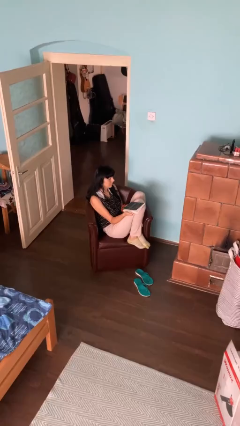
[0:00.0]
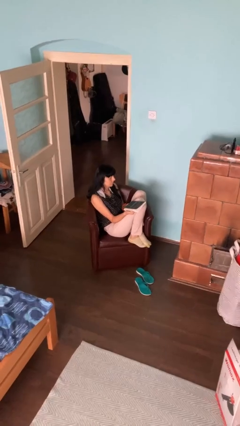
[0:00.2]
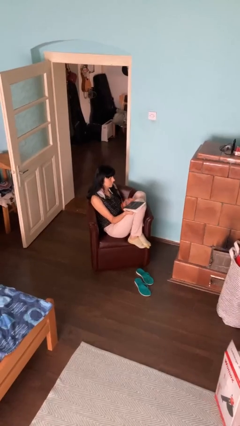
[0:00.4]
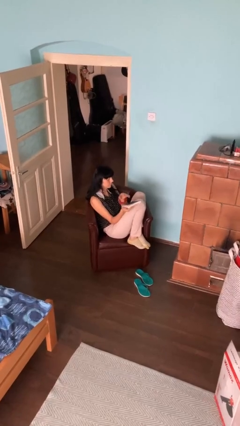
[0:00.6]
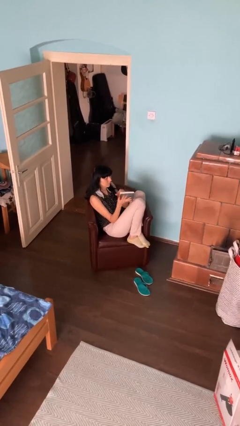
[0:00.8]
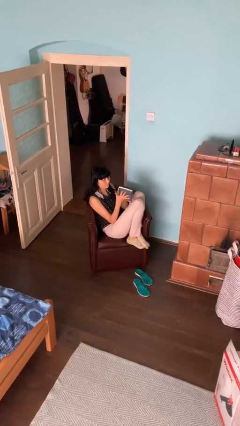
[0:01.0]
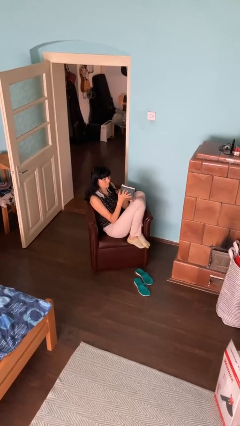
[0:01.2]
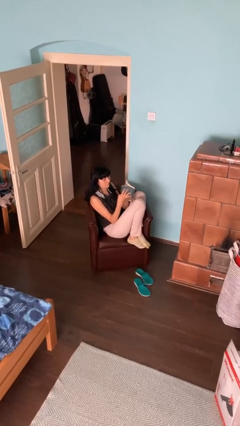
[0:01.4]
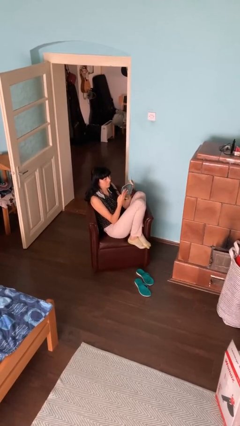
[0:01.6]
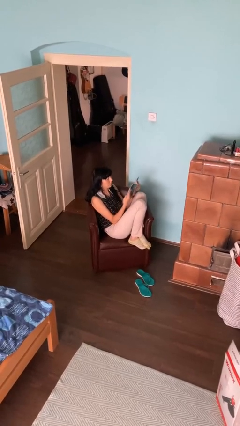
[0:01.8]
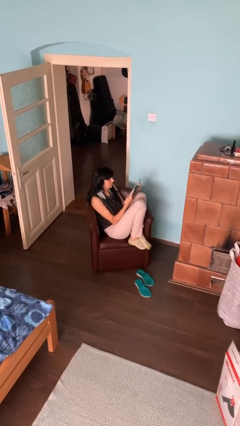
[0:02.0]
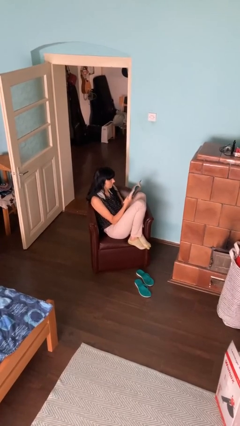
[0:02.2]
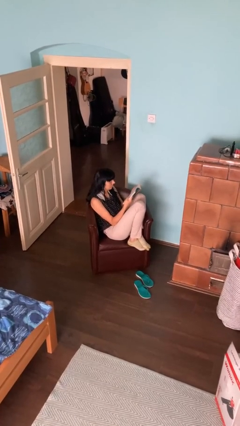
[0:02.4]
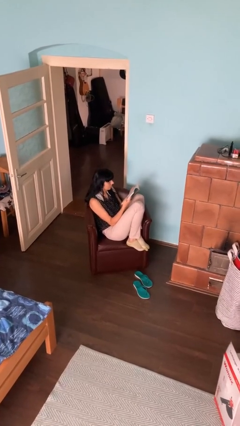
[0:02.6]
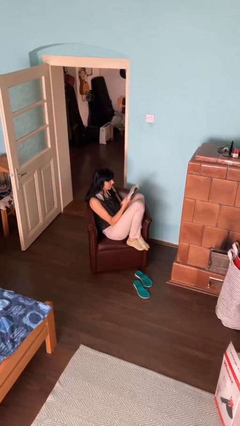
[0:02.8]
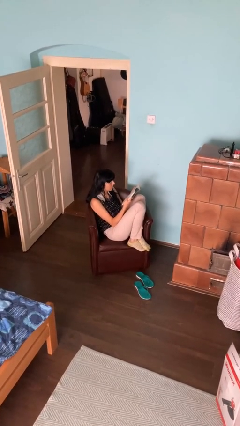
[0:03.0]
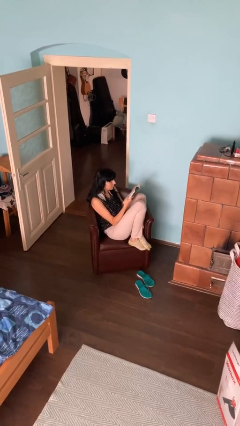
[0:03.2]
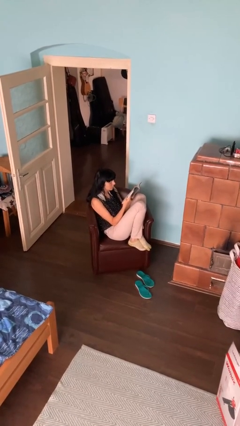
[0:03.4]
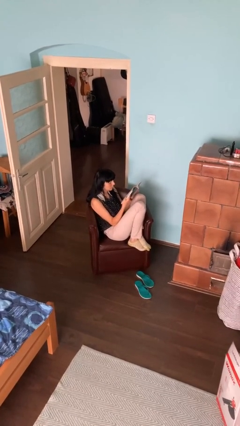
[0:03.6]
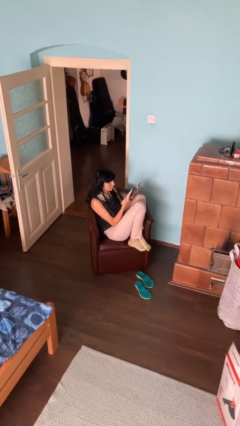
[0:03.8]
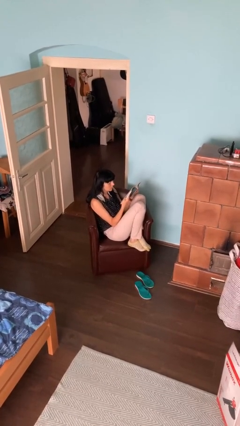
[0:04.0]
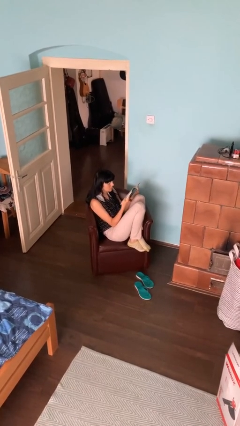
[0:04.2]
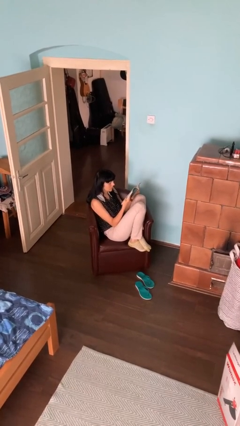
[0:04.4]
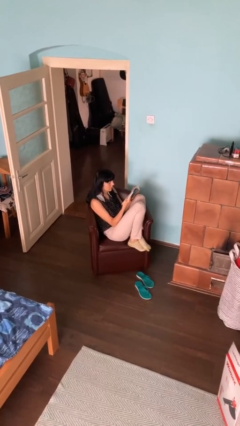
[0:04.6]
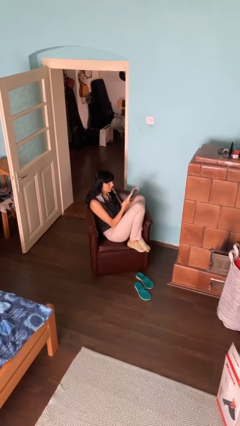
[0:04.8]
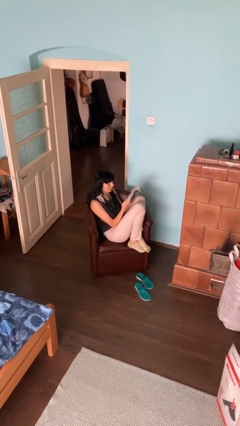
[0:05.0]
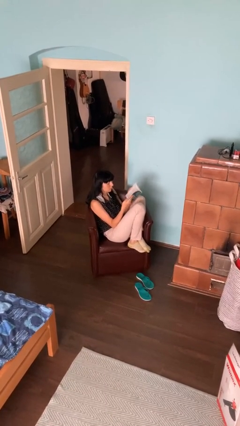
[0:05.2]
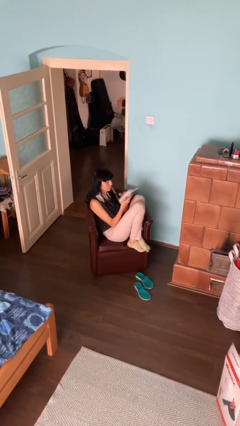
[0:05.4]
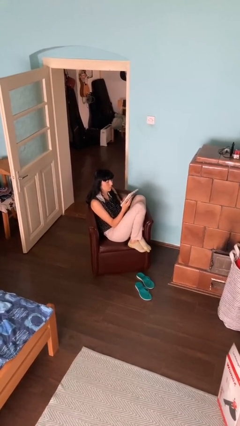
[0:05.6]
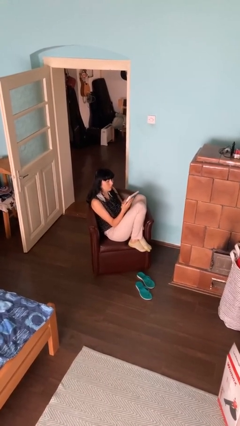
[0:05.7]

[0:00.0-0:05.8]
person reads book

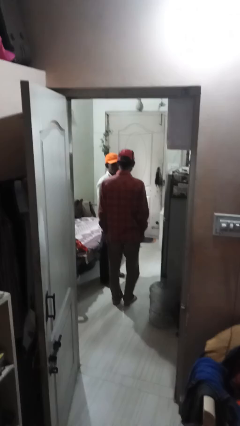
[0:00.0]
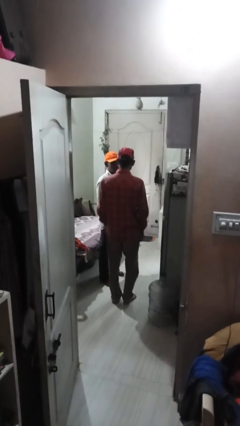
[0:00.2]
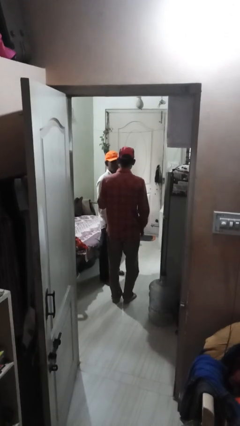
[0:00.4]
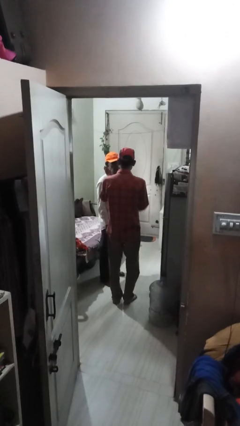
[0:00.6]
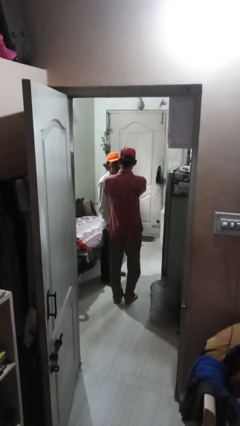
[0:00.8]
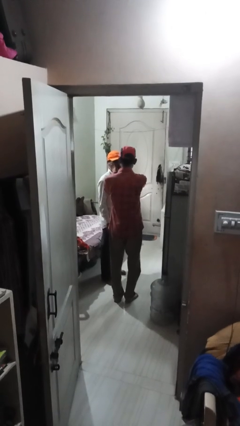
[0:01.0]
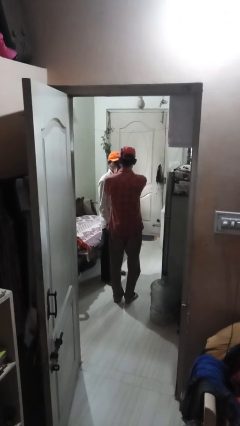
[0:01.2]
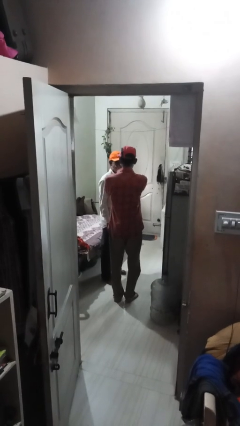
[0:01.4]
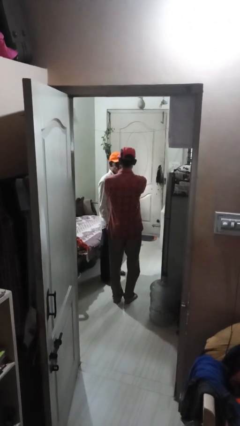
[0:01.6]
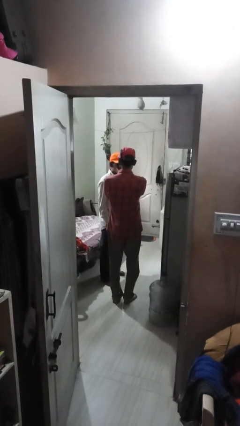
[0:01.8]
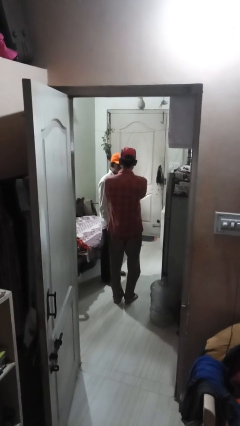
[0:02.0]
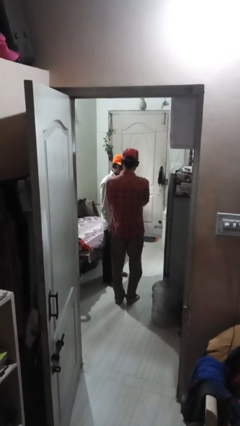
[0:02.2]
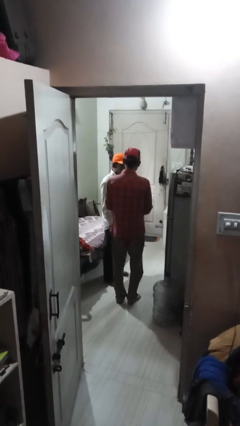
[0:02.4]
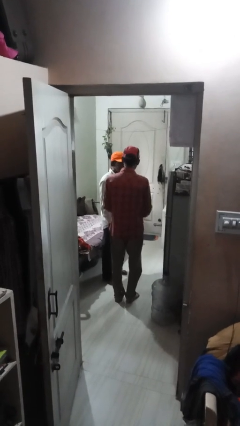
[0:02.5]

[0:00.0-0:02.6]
person touches face of person

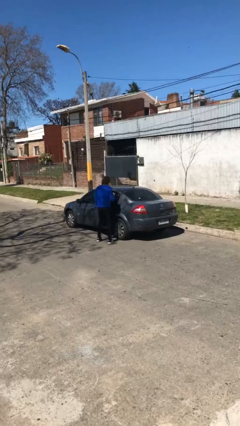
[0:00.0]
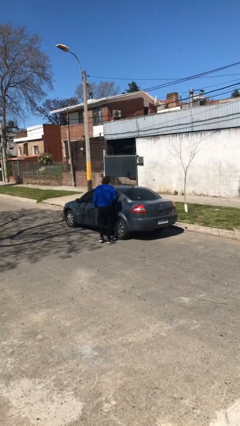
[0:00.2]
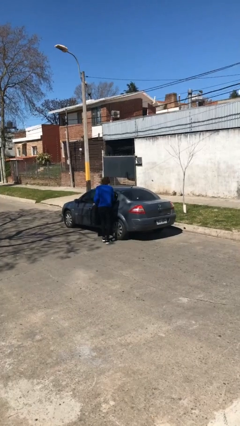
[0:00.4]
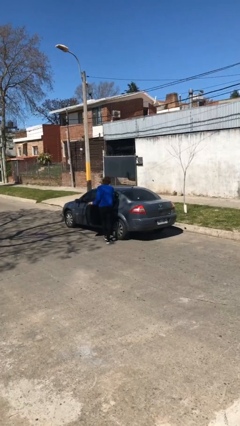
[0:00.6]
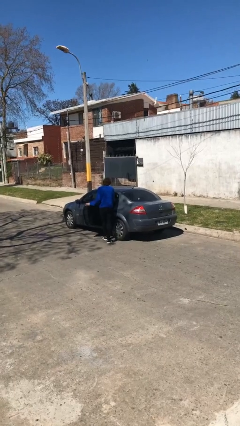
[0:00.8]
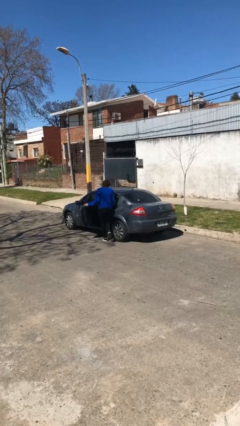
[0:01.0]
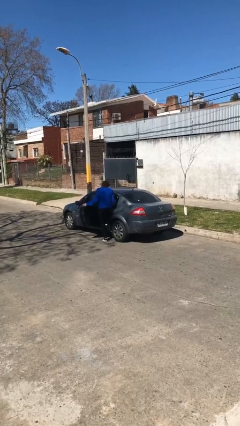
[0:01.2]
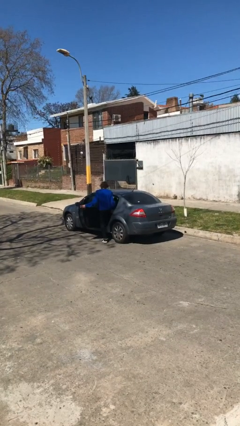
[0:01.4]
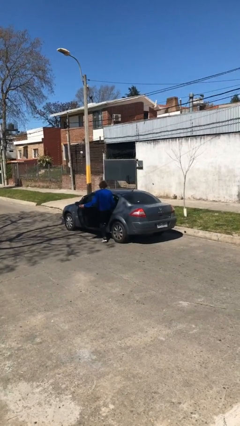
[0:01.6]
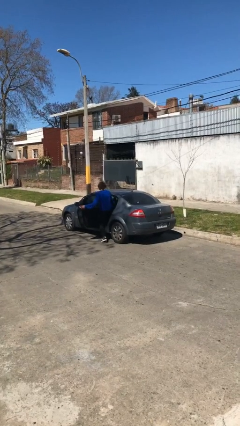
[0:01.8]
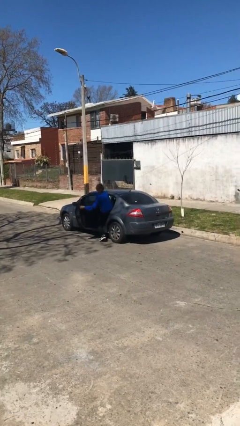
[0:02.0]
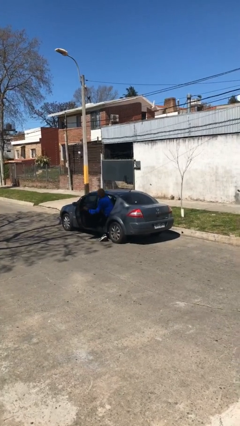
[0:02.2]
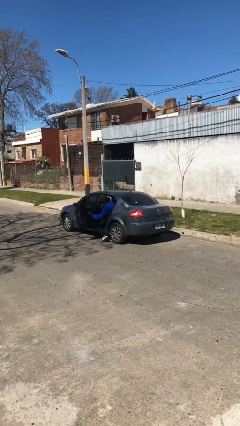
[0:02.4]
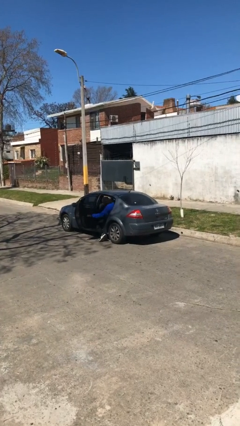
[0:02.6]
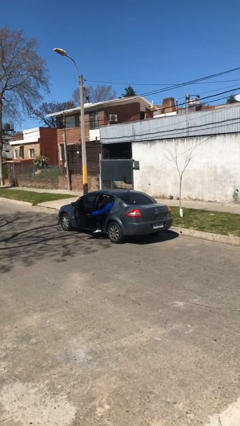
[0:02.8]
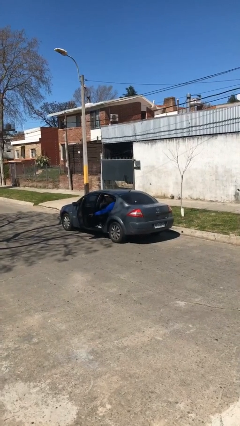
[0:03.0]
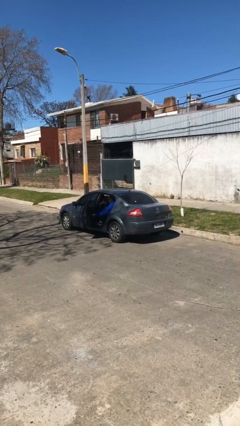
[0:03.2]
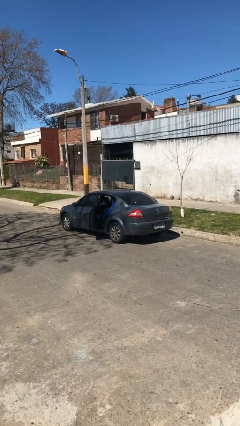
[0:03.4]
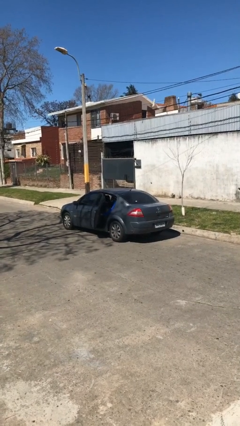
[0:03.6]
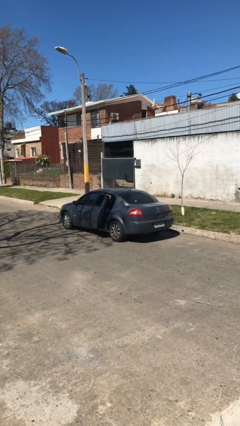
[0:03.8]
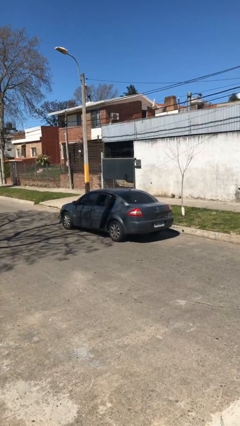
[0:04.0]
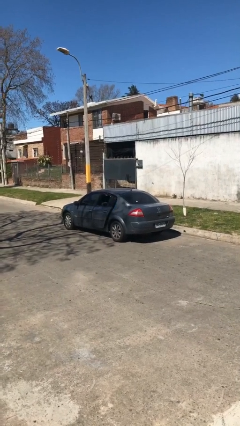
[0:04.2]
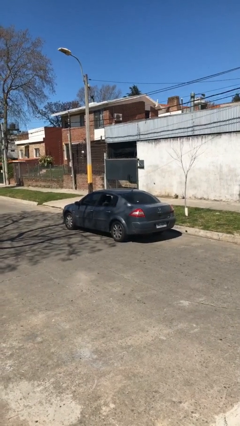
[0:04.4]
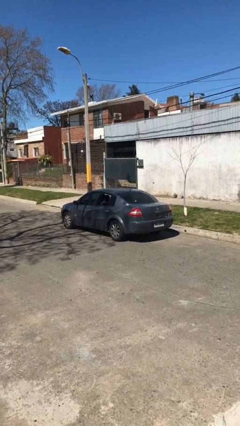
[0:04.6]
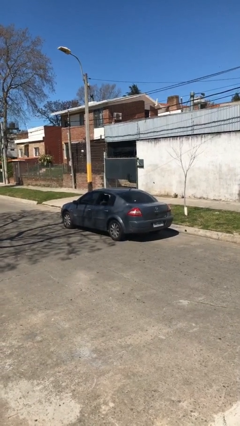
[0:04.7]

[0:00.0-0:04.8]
car picks up person

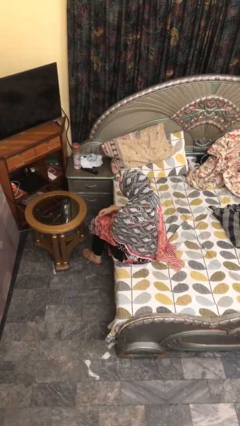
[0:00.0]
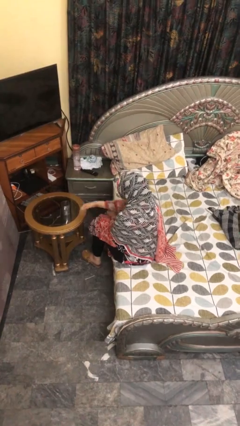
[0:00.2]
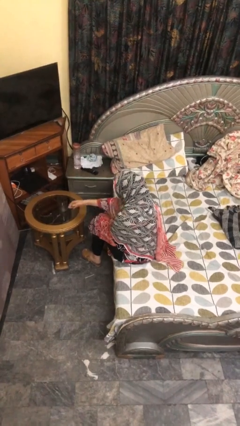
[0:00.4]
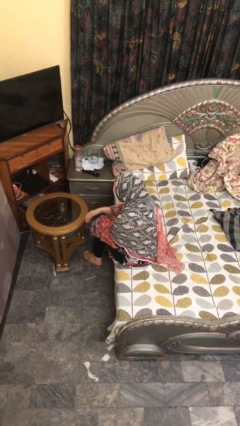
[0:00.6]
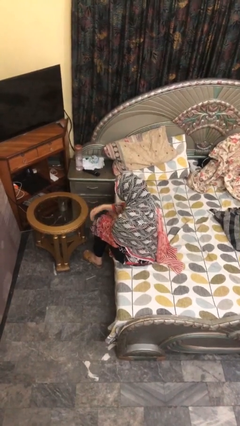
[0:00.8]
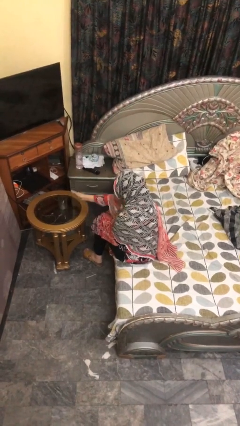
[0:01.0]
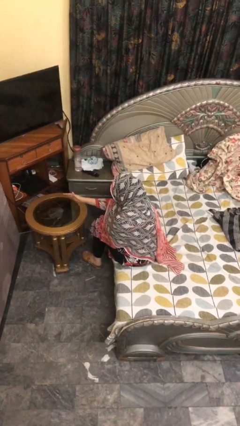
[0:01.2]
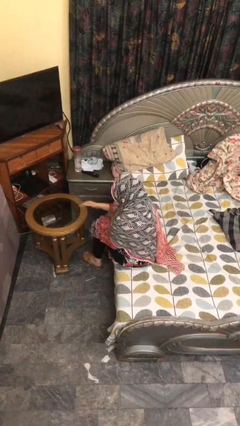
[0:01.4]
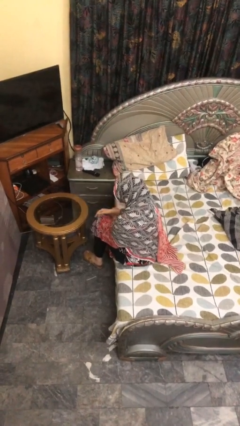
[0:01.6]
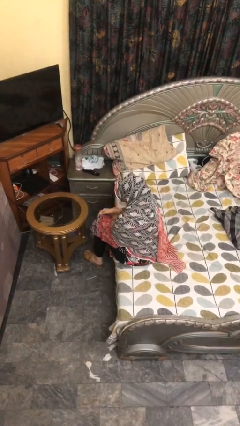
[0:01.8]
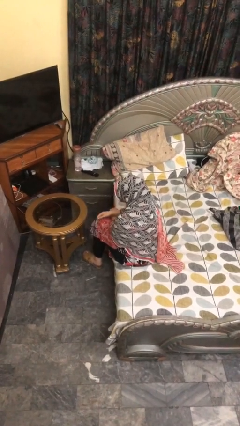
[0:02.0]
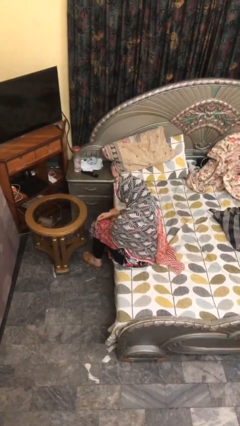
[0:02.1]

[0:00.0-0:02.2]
person knocks over glass

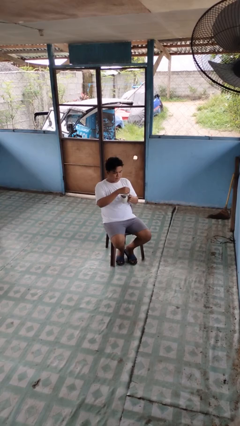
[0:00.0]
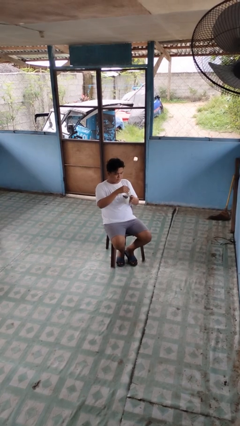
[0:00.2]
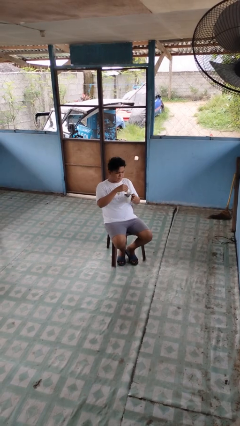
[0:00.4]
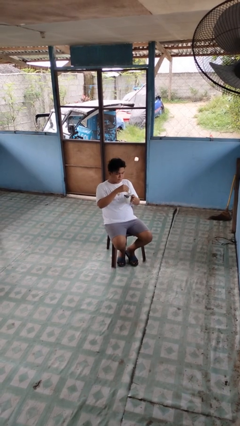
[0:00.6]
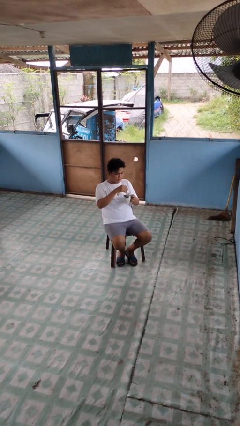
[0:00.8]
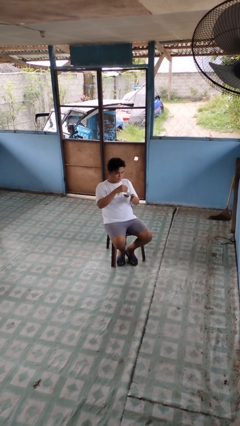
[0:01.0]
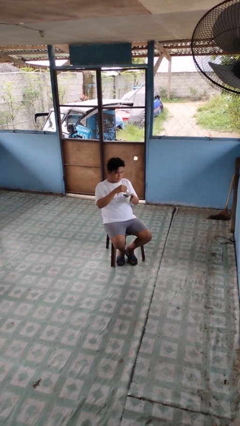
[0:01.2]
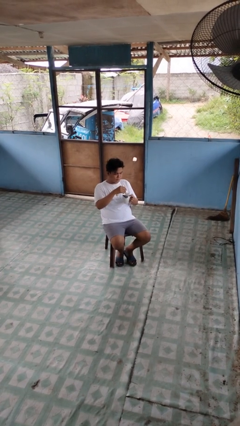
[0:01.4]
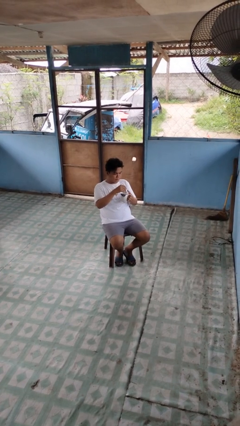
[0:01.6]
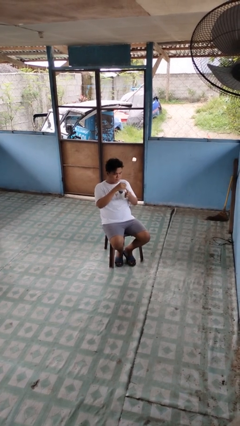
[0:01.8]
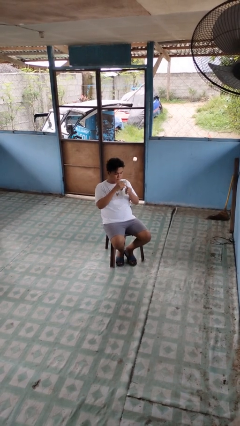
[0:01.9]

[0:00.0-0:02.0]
person stirs mug

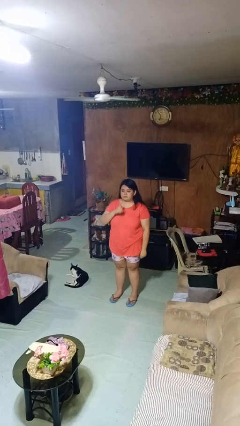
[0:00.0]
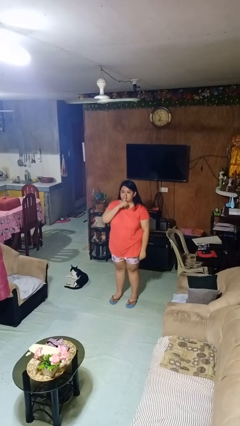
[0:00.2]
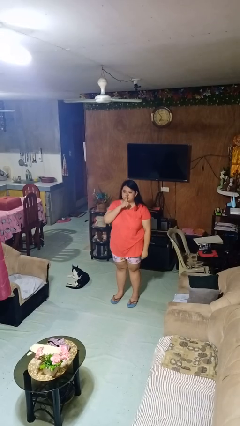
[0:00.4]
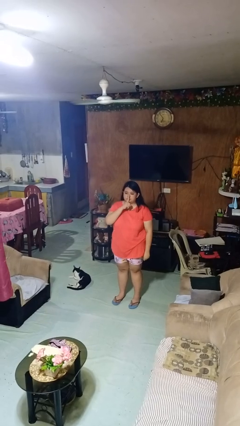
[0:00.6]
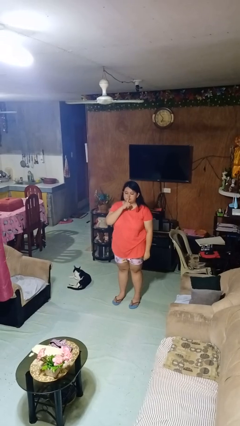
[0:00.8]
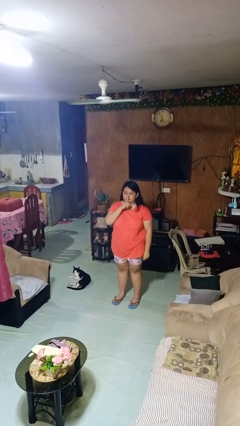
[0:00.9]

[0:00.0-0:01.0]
person gestures be quiet
